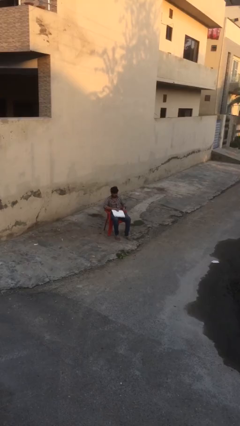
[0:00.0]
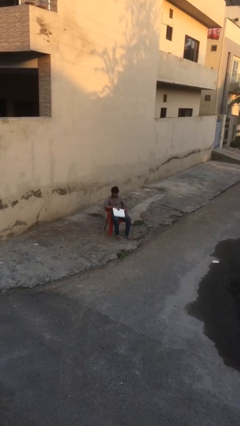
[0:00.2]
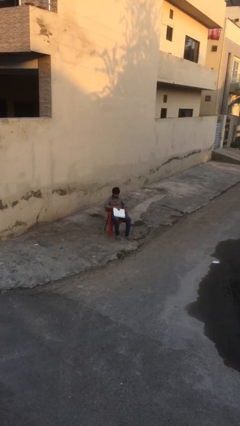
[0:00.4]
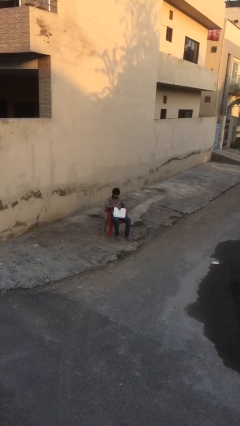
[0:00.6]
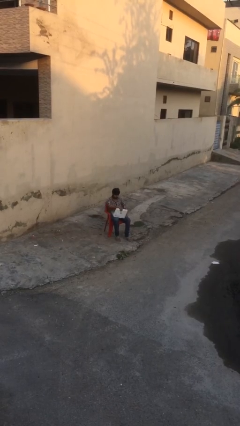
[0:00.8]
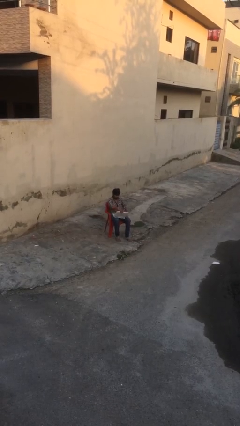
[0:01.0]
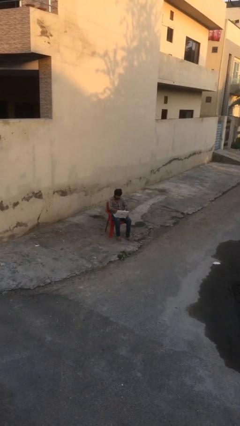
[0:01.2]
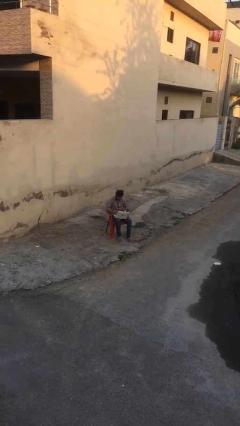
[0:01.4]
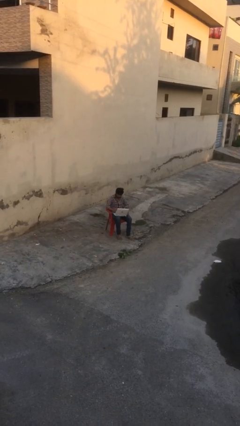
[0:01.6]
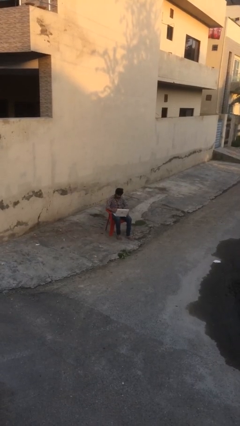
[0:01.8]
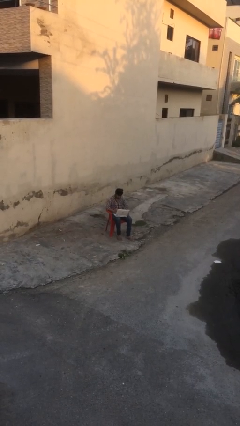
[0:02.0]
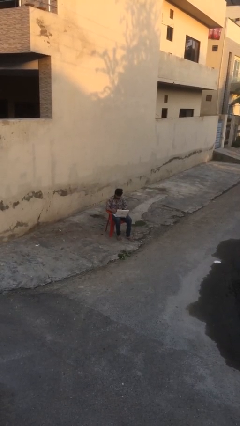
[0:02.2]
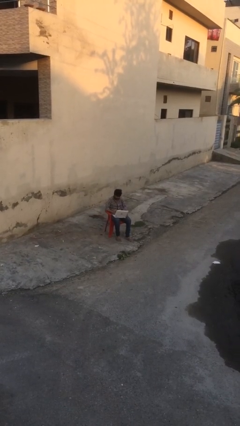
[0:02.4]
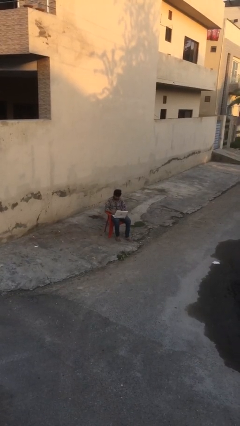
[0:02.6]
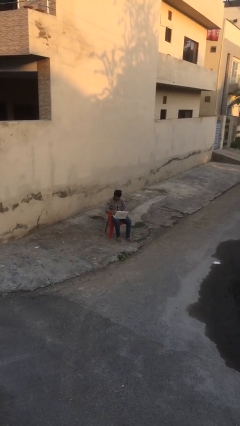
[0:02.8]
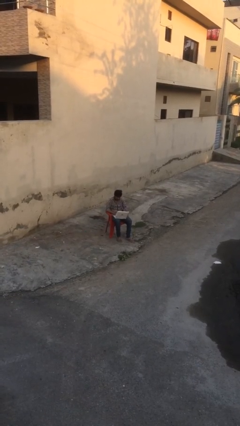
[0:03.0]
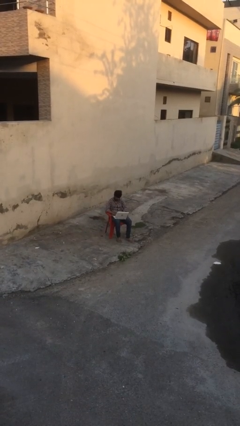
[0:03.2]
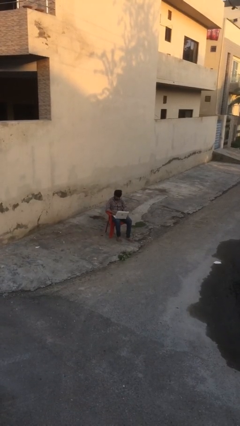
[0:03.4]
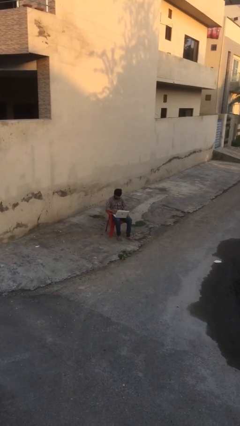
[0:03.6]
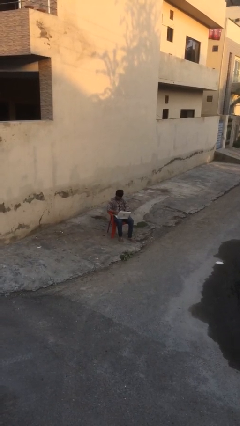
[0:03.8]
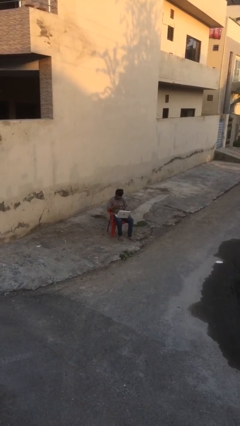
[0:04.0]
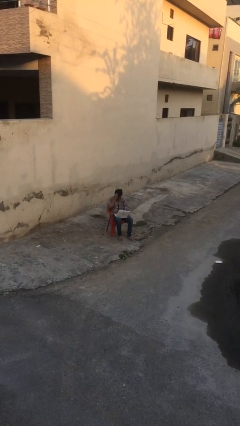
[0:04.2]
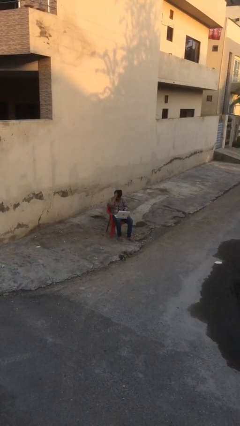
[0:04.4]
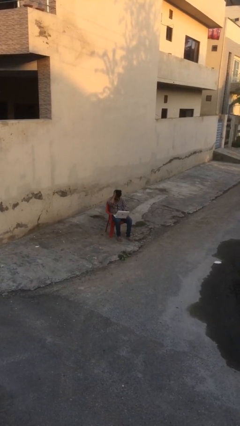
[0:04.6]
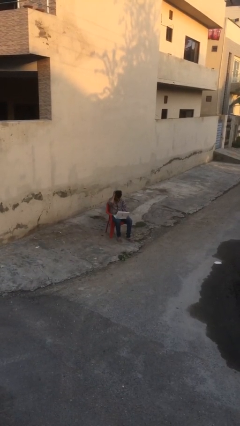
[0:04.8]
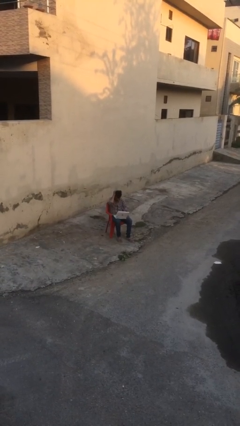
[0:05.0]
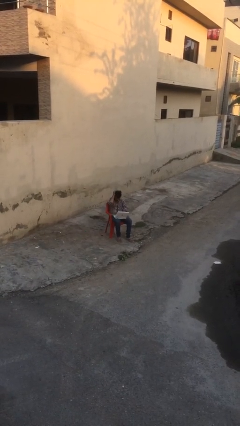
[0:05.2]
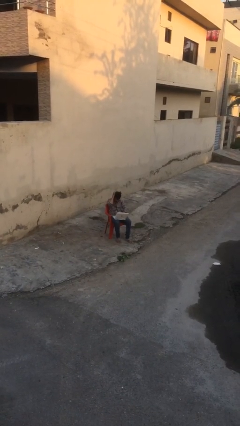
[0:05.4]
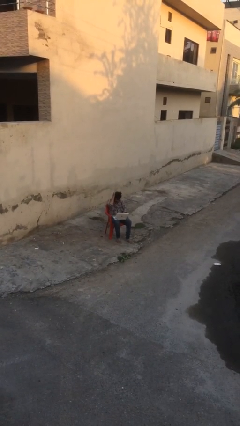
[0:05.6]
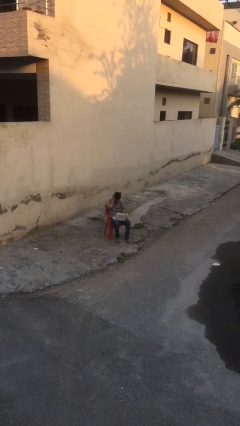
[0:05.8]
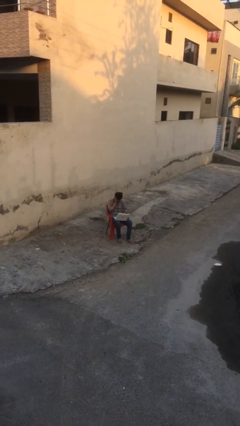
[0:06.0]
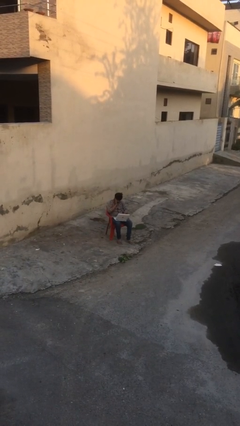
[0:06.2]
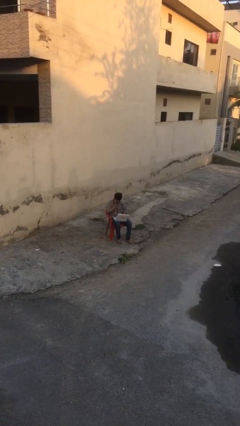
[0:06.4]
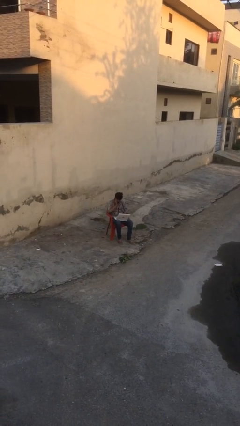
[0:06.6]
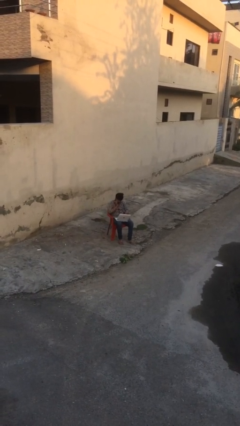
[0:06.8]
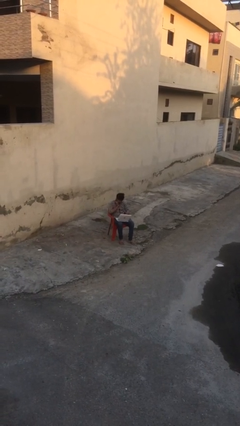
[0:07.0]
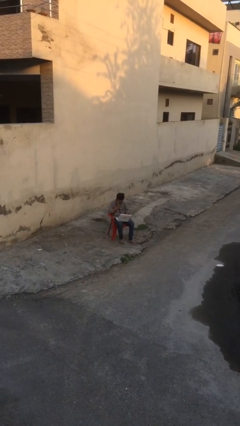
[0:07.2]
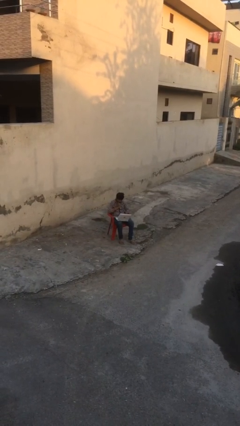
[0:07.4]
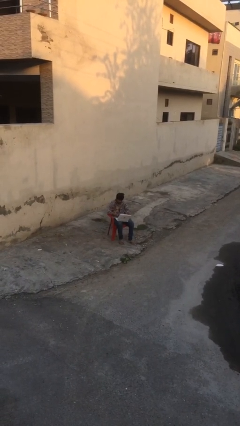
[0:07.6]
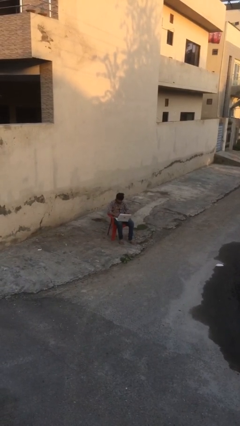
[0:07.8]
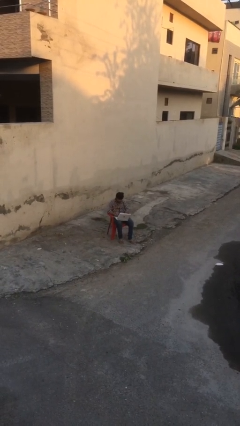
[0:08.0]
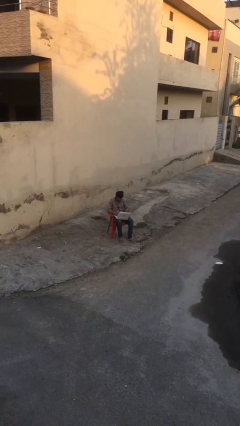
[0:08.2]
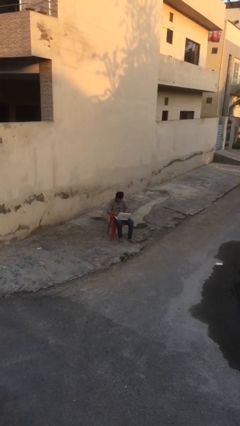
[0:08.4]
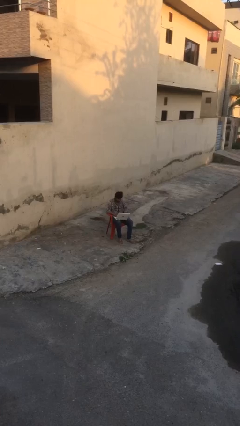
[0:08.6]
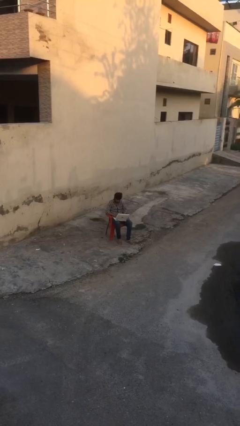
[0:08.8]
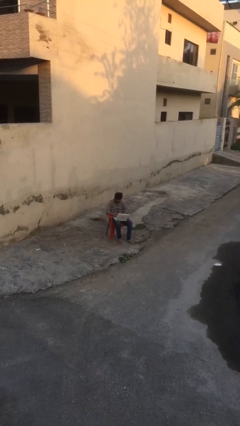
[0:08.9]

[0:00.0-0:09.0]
person interacts with laptop

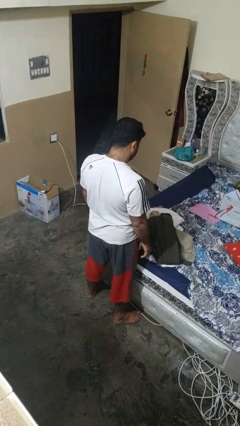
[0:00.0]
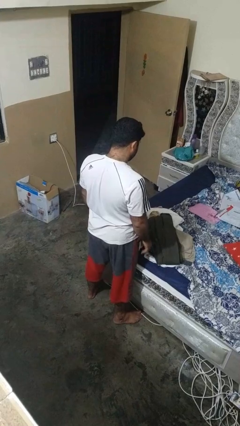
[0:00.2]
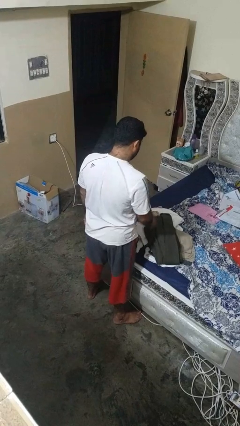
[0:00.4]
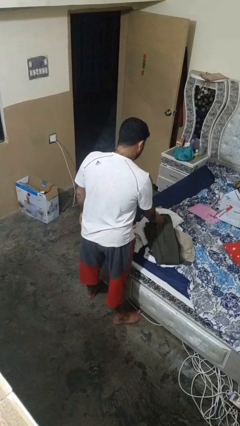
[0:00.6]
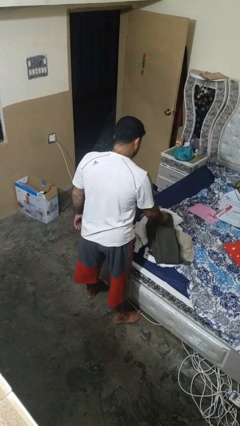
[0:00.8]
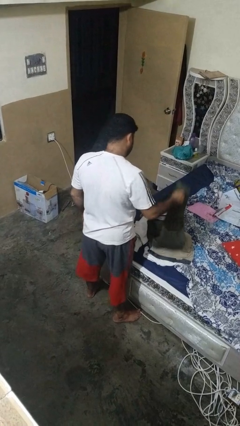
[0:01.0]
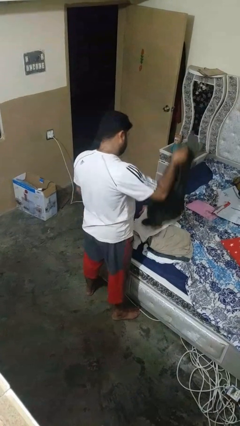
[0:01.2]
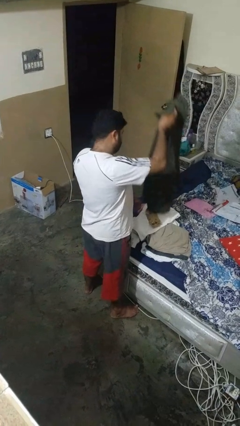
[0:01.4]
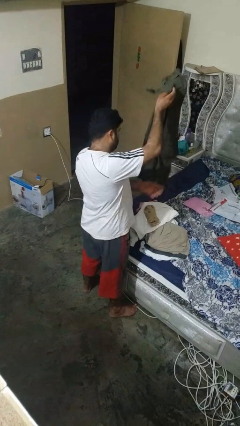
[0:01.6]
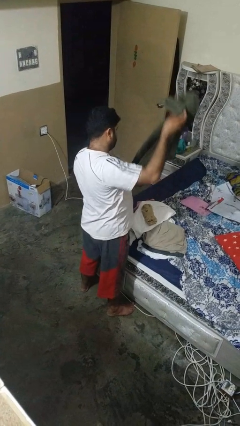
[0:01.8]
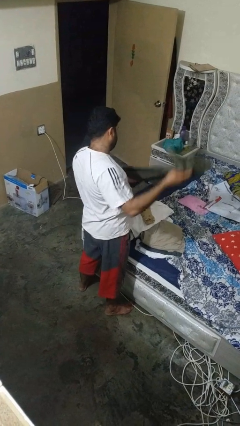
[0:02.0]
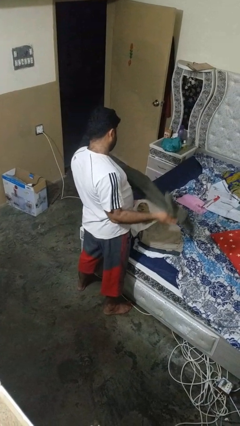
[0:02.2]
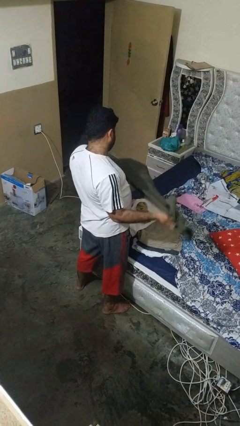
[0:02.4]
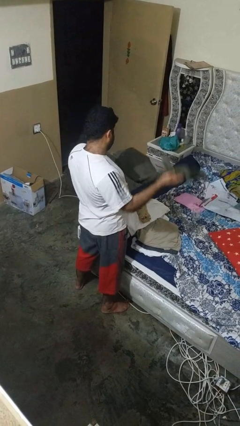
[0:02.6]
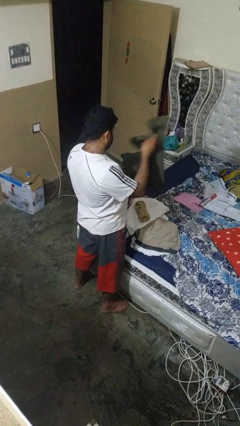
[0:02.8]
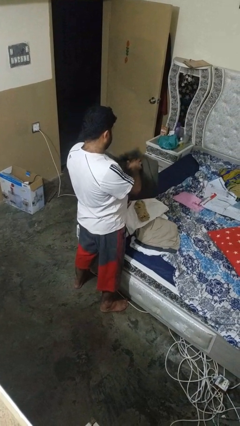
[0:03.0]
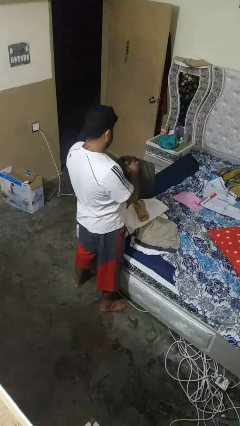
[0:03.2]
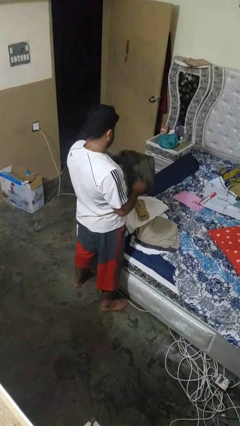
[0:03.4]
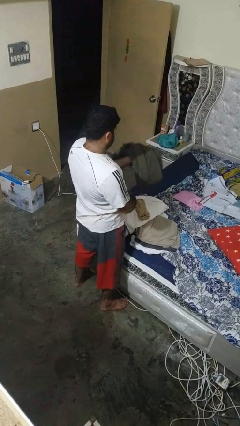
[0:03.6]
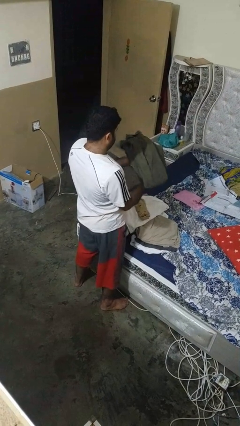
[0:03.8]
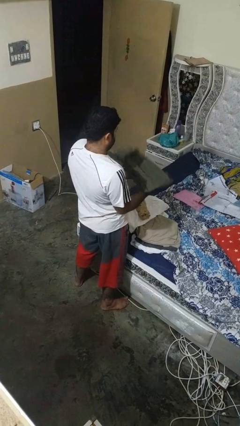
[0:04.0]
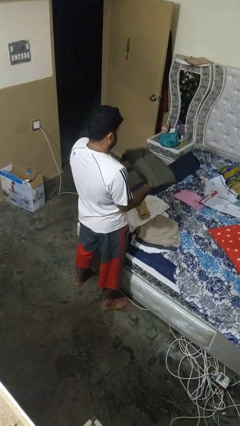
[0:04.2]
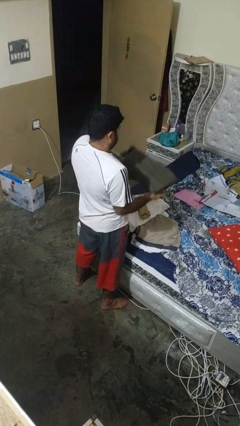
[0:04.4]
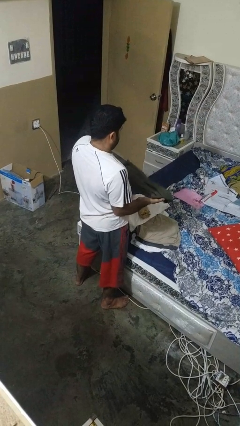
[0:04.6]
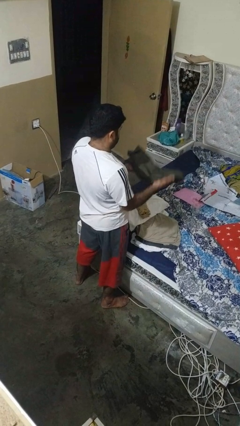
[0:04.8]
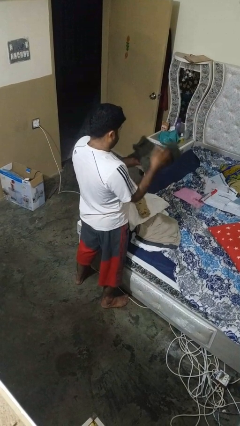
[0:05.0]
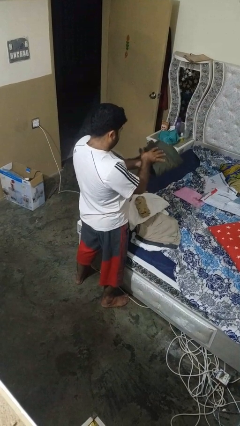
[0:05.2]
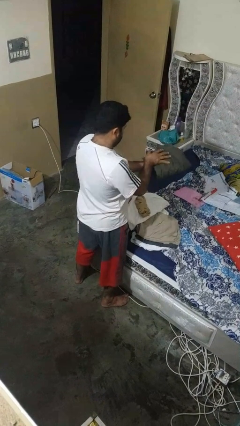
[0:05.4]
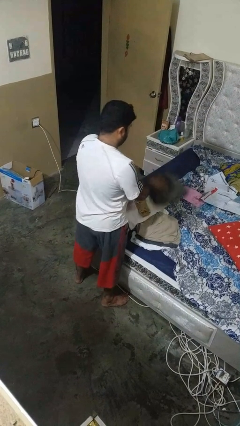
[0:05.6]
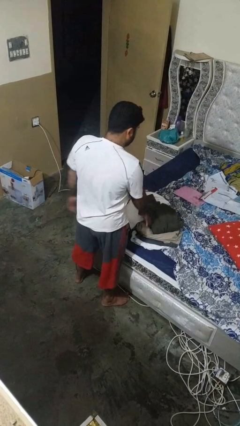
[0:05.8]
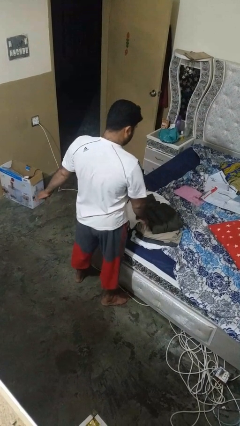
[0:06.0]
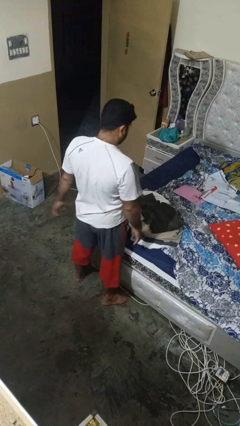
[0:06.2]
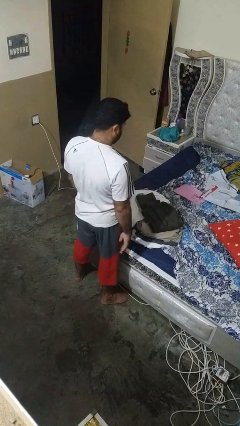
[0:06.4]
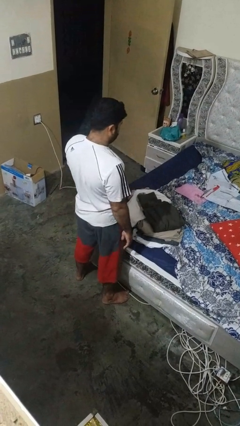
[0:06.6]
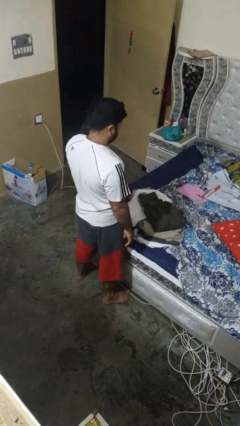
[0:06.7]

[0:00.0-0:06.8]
person folds pants

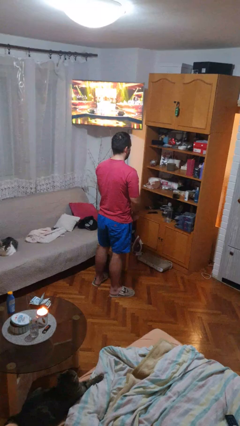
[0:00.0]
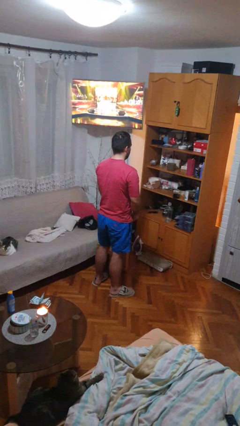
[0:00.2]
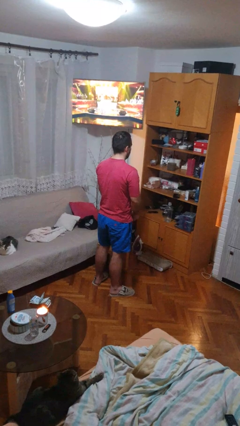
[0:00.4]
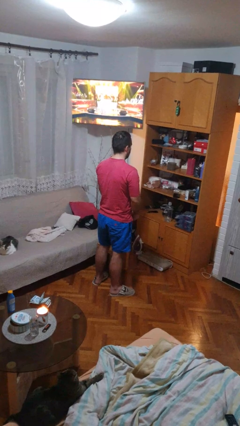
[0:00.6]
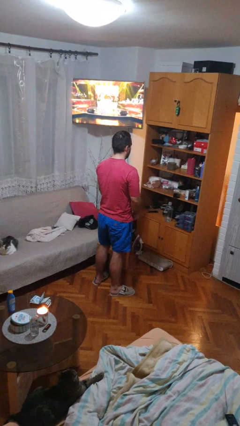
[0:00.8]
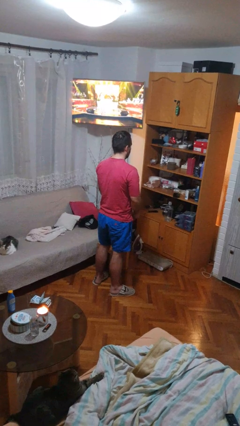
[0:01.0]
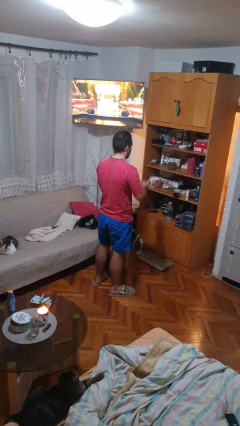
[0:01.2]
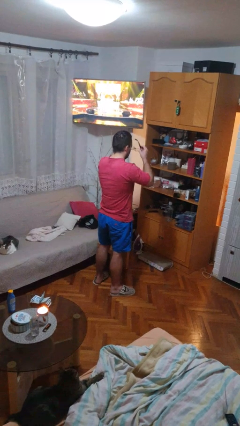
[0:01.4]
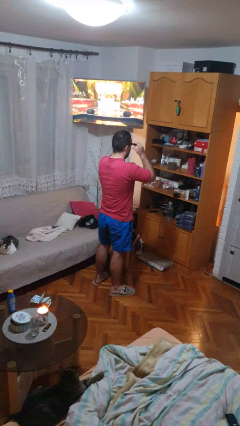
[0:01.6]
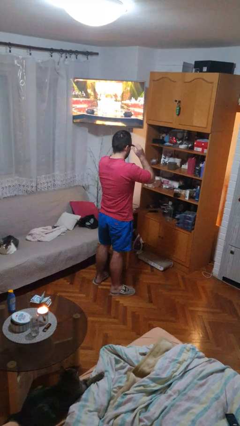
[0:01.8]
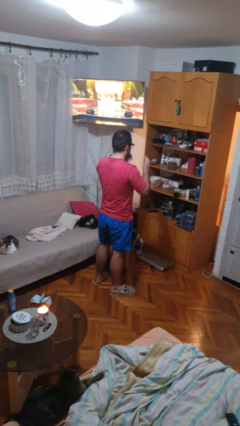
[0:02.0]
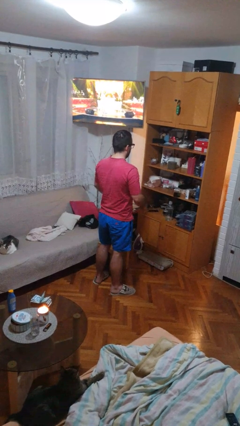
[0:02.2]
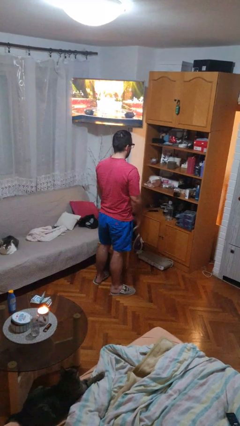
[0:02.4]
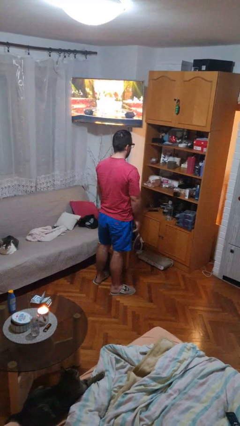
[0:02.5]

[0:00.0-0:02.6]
person puts on glasses
